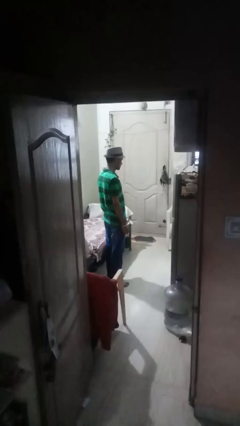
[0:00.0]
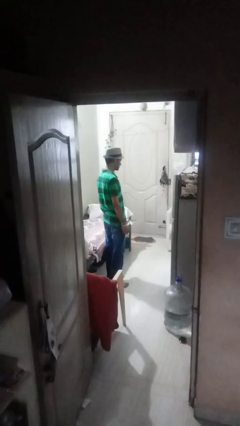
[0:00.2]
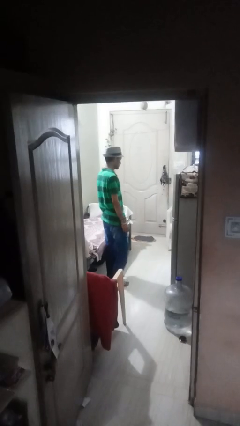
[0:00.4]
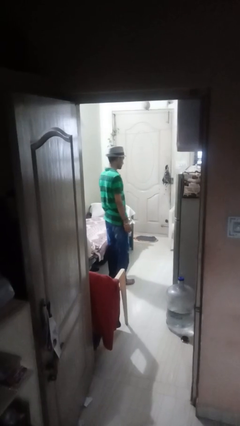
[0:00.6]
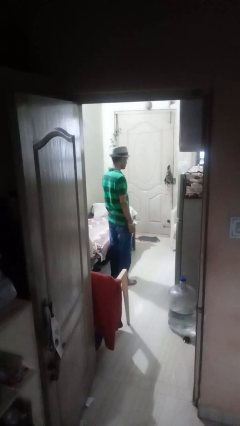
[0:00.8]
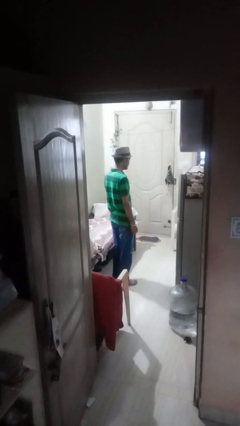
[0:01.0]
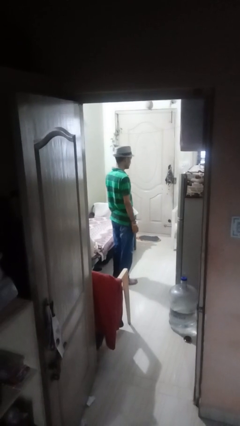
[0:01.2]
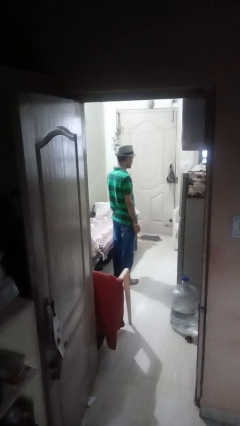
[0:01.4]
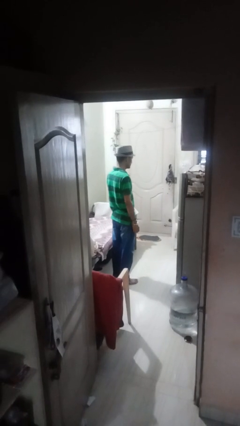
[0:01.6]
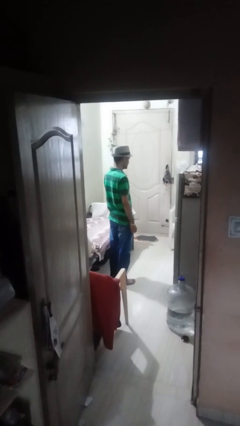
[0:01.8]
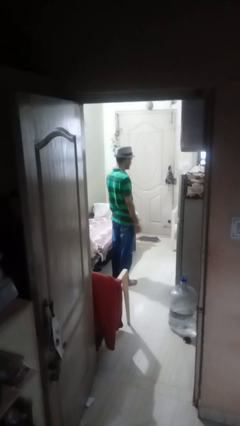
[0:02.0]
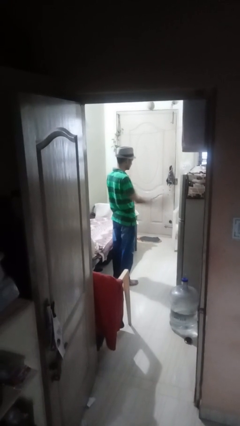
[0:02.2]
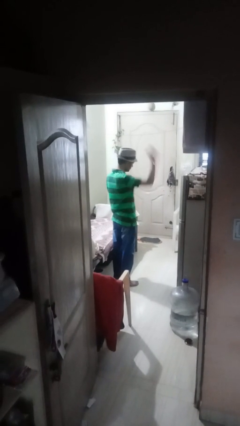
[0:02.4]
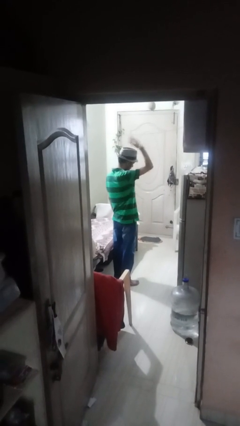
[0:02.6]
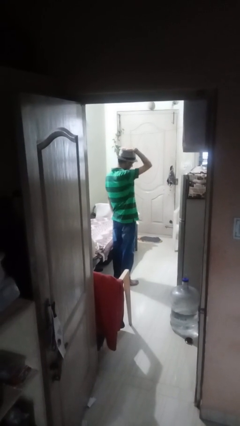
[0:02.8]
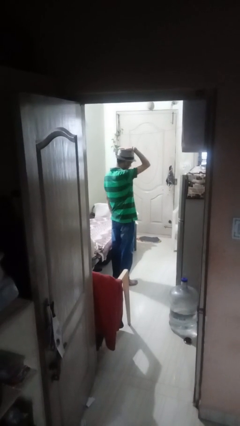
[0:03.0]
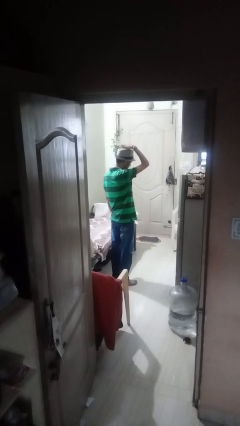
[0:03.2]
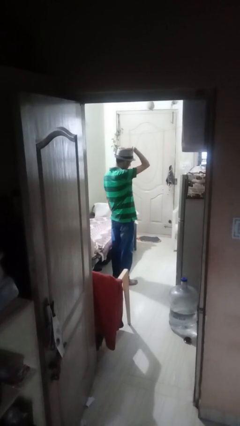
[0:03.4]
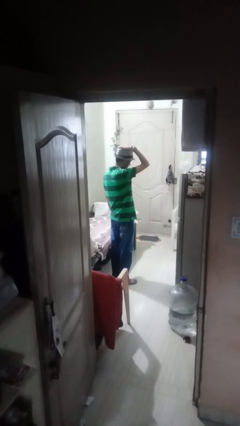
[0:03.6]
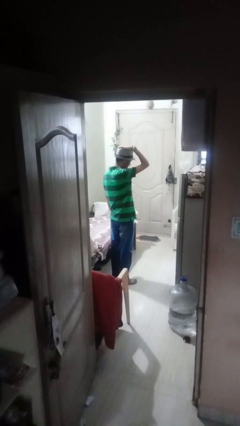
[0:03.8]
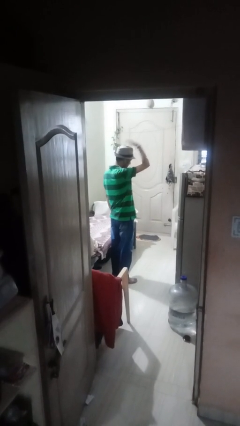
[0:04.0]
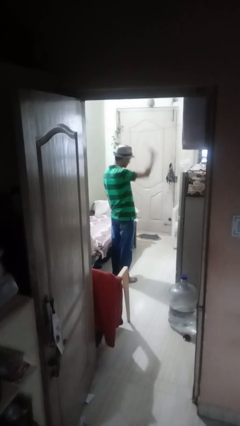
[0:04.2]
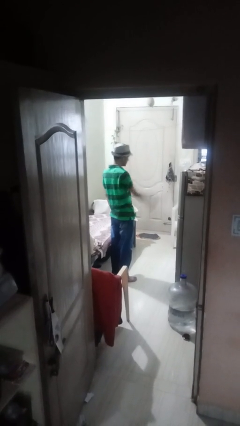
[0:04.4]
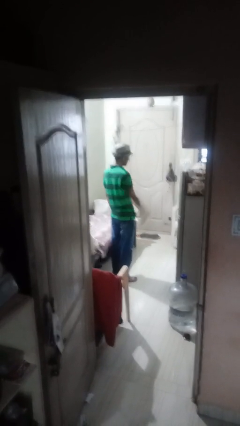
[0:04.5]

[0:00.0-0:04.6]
person pats head

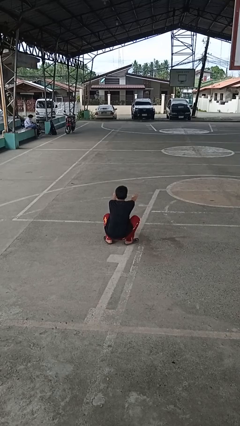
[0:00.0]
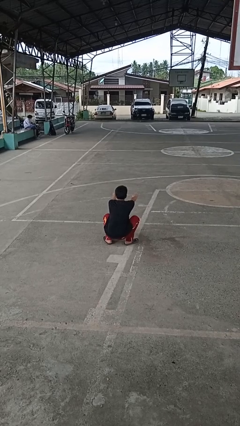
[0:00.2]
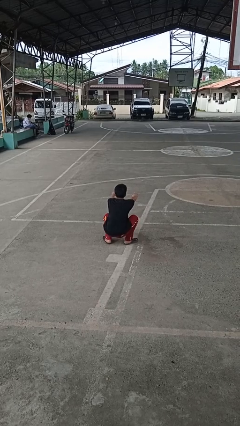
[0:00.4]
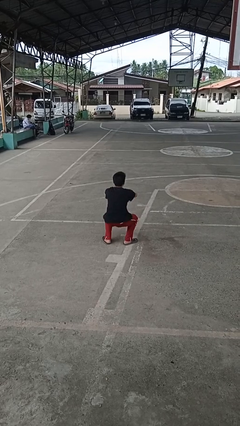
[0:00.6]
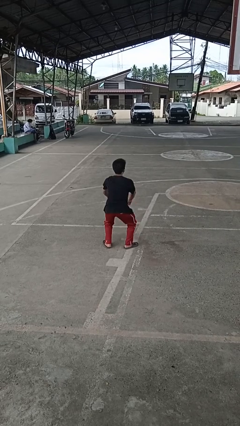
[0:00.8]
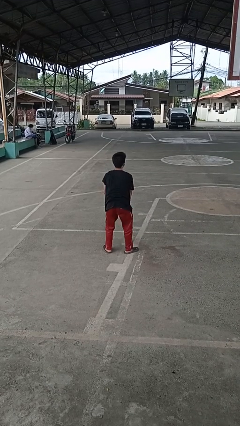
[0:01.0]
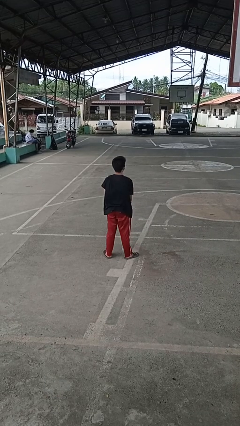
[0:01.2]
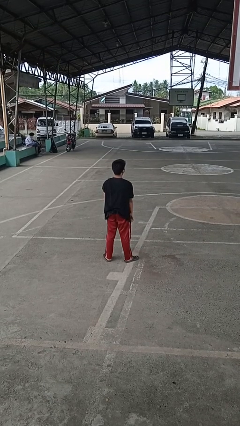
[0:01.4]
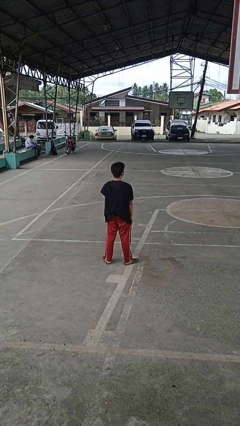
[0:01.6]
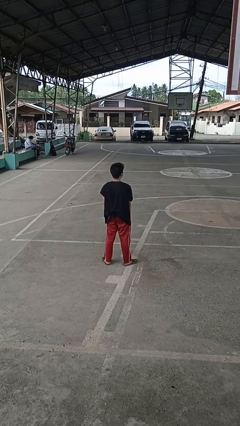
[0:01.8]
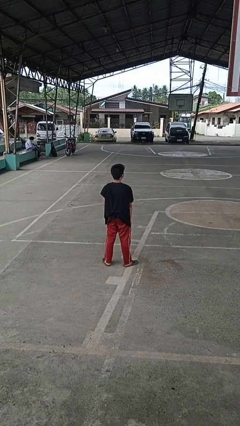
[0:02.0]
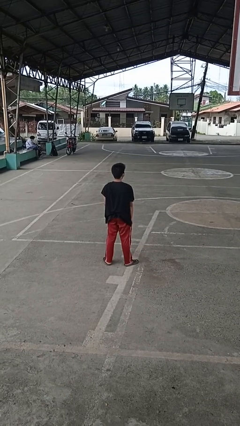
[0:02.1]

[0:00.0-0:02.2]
person stands up

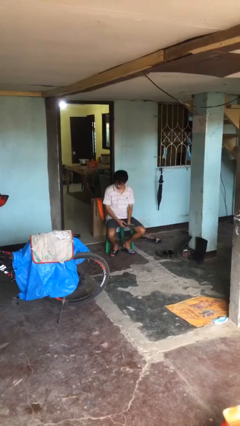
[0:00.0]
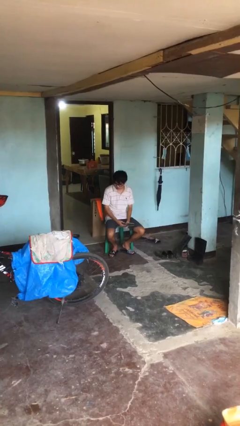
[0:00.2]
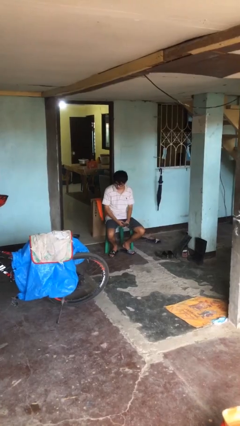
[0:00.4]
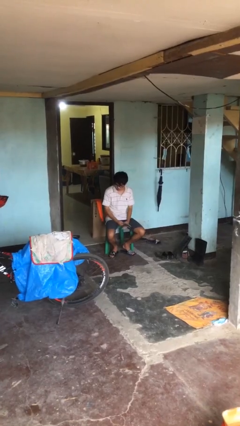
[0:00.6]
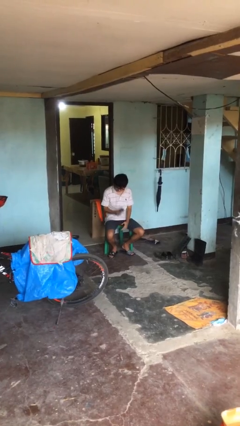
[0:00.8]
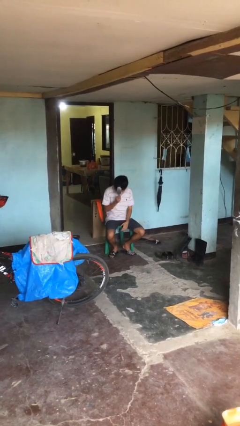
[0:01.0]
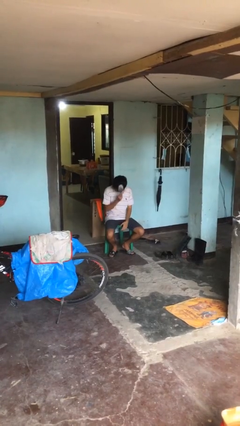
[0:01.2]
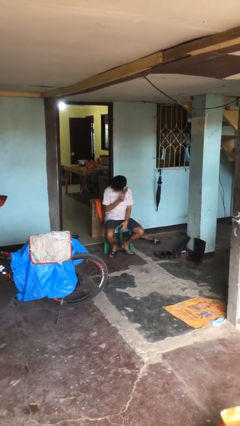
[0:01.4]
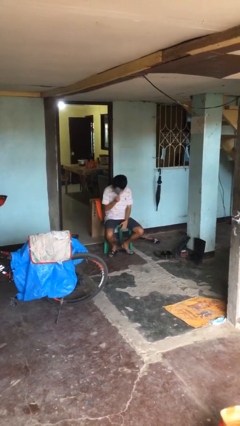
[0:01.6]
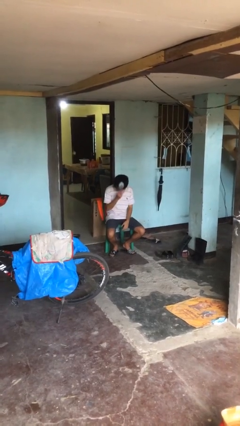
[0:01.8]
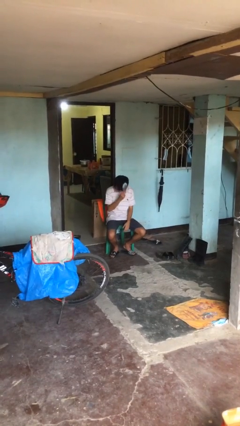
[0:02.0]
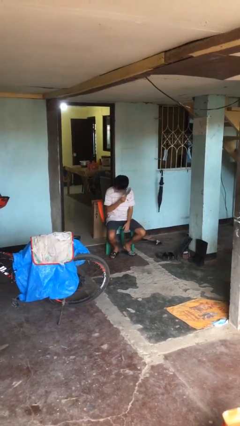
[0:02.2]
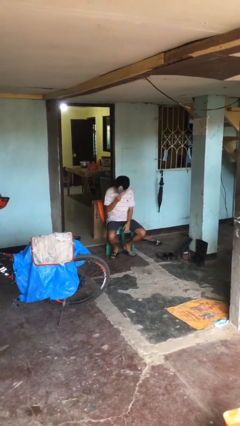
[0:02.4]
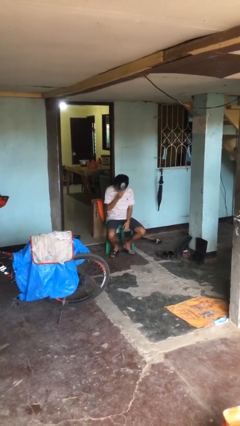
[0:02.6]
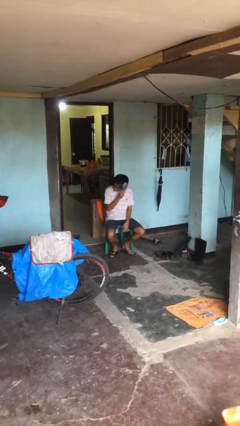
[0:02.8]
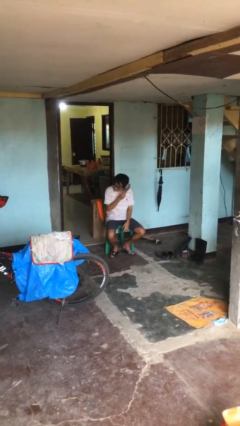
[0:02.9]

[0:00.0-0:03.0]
person brushes hair

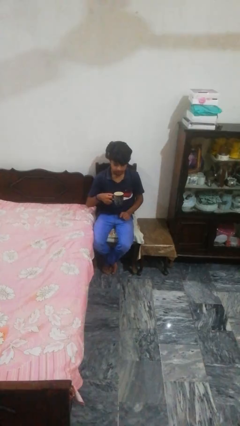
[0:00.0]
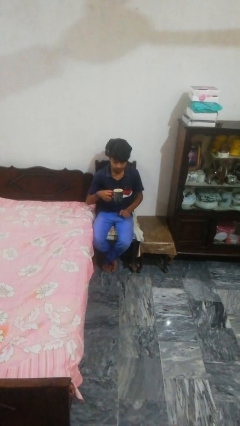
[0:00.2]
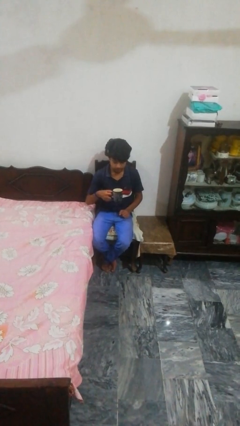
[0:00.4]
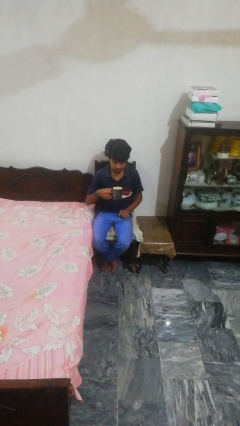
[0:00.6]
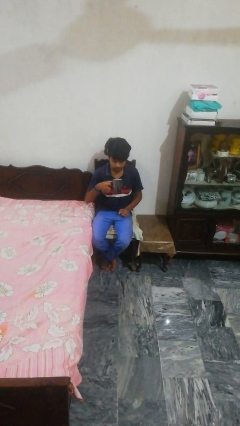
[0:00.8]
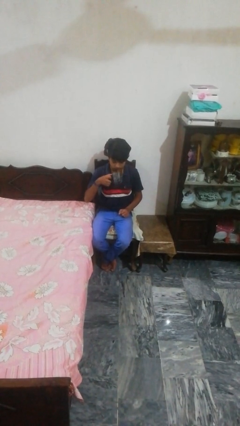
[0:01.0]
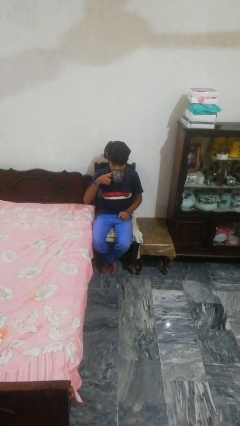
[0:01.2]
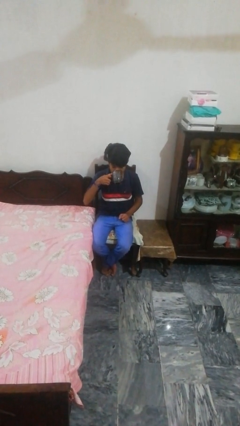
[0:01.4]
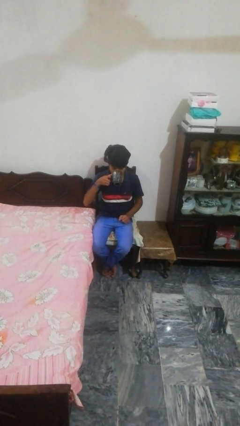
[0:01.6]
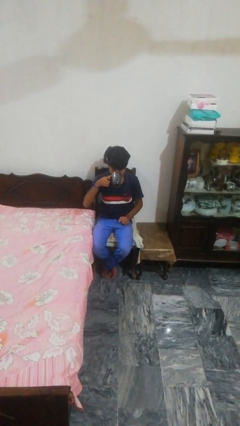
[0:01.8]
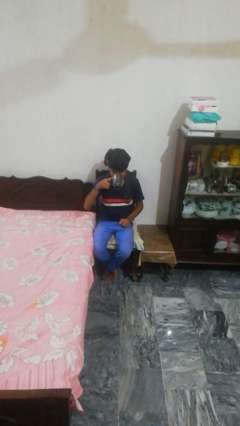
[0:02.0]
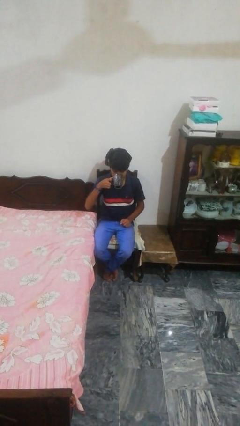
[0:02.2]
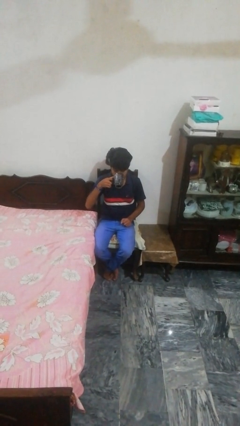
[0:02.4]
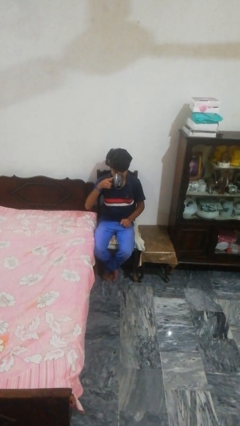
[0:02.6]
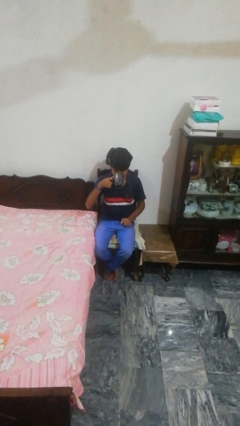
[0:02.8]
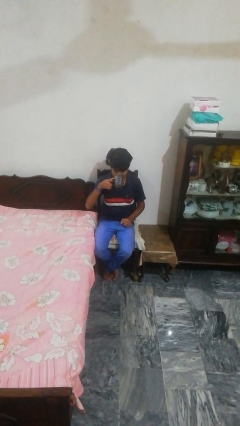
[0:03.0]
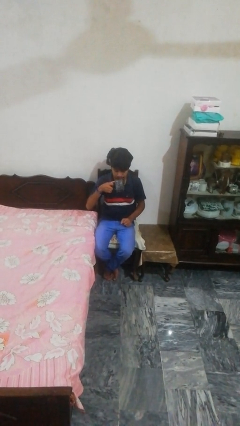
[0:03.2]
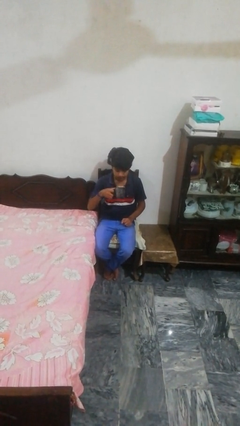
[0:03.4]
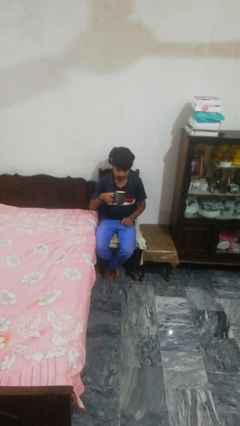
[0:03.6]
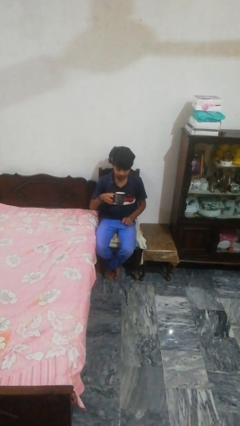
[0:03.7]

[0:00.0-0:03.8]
person drinks from mug

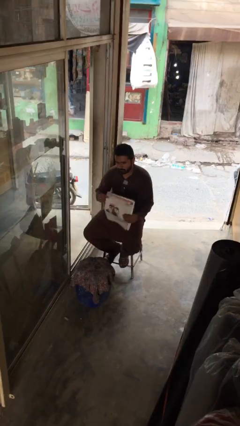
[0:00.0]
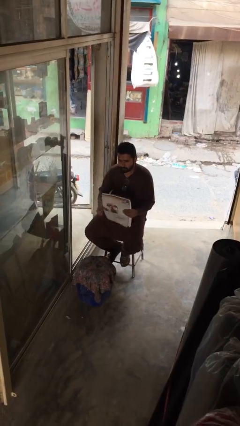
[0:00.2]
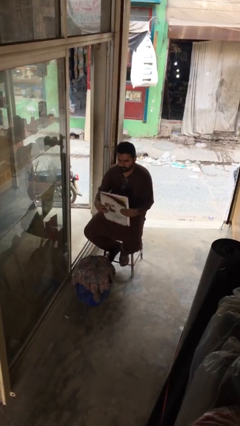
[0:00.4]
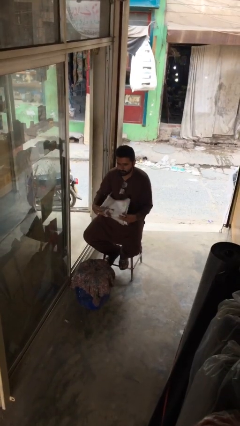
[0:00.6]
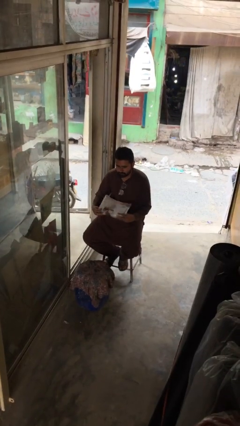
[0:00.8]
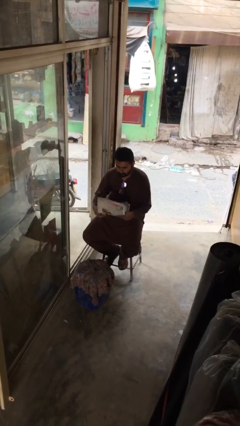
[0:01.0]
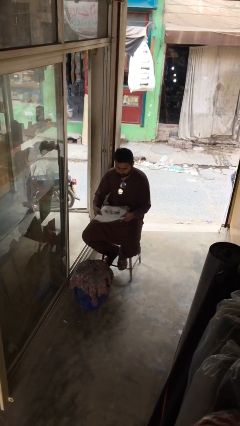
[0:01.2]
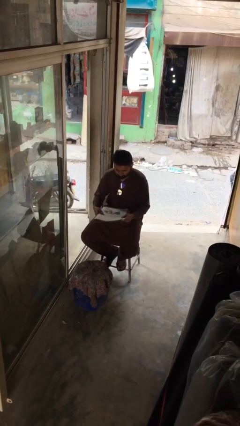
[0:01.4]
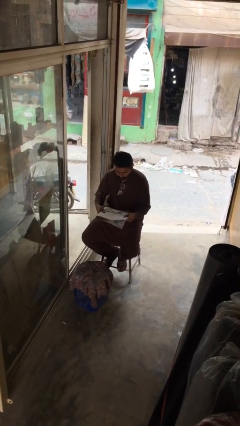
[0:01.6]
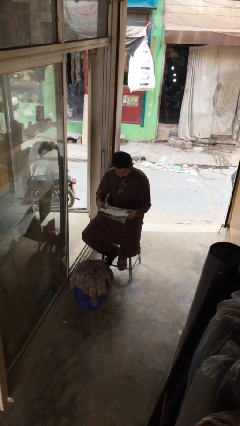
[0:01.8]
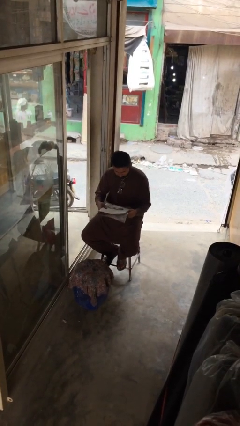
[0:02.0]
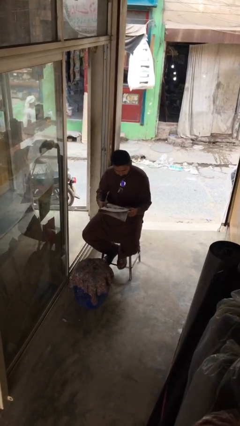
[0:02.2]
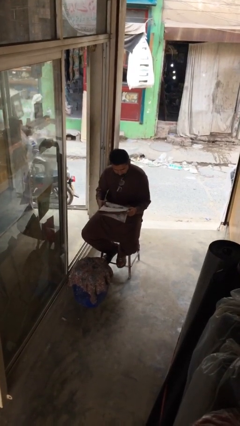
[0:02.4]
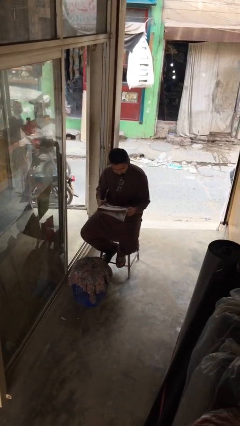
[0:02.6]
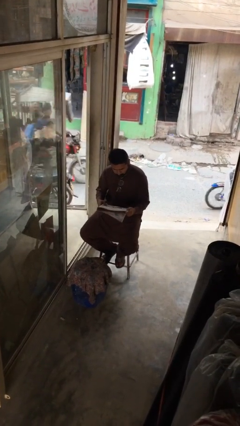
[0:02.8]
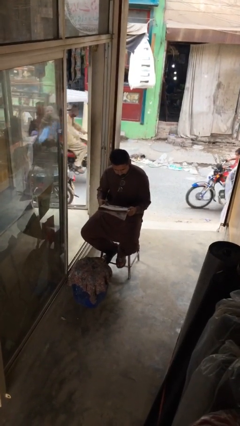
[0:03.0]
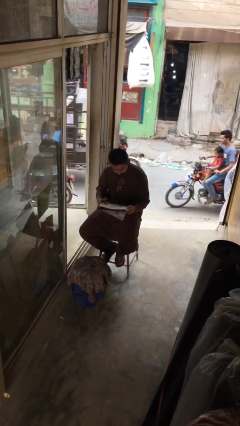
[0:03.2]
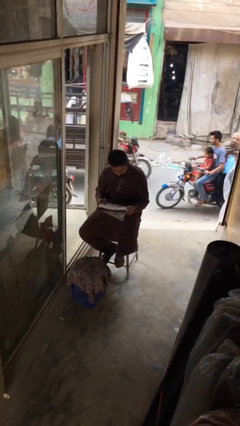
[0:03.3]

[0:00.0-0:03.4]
person reads document

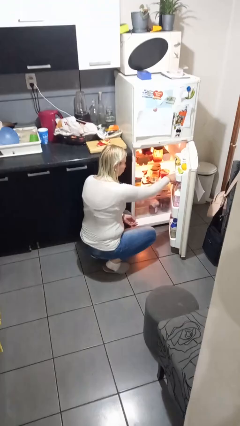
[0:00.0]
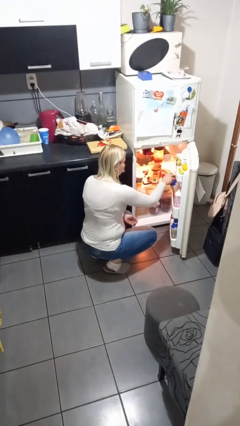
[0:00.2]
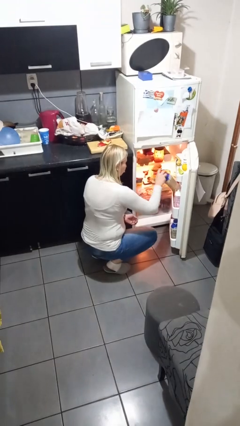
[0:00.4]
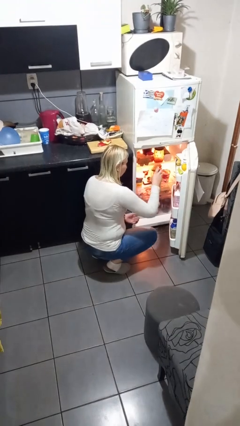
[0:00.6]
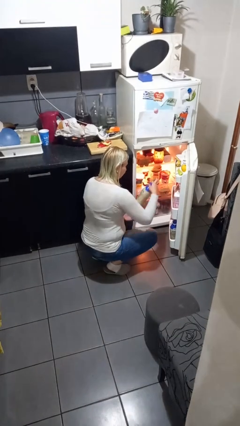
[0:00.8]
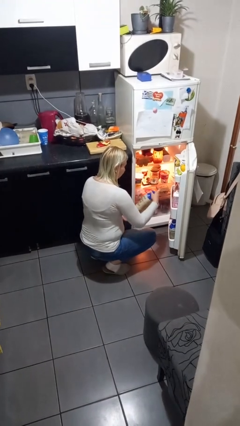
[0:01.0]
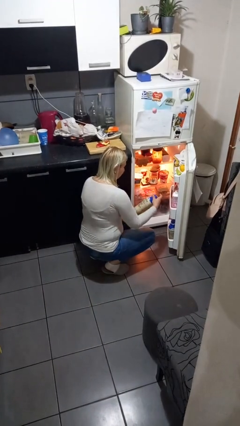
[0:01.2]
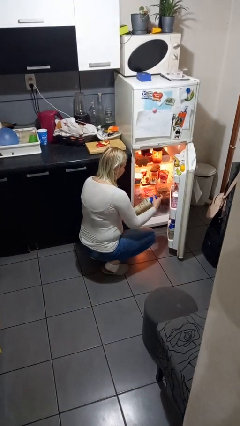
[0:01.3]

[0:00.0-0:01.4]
person takes object from refrigerator
